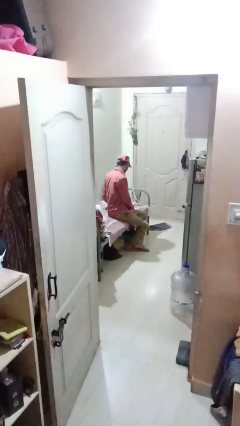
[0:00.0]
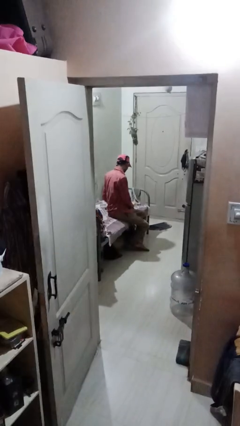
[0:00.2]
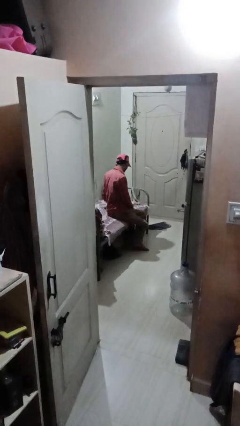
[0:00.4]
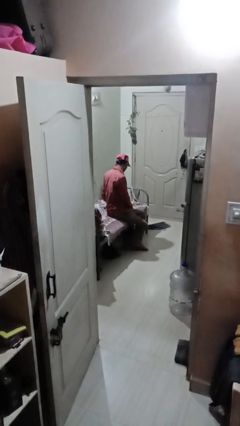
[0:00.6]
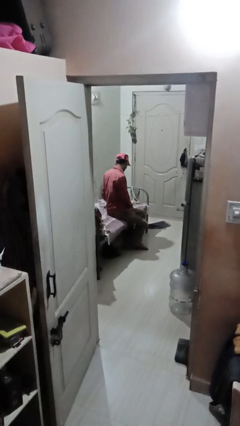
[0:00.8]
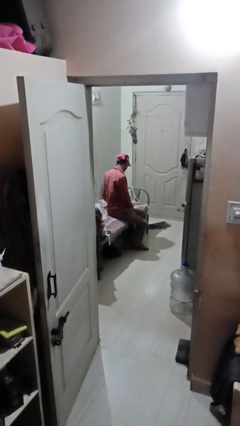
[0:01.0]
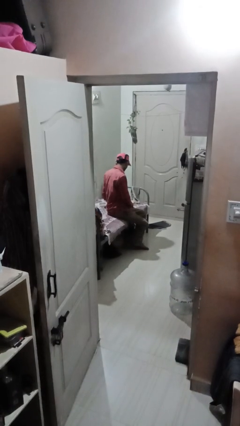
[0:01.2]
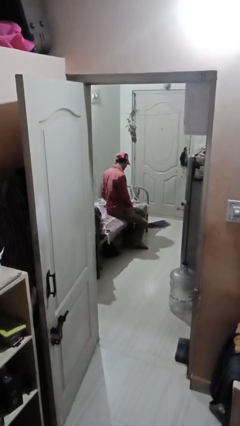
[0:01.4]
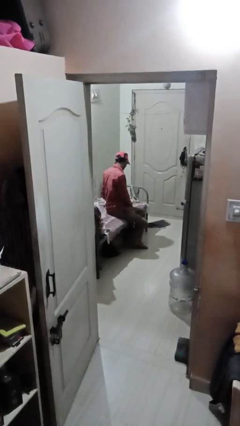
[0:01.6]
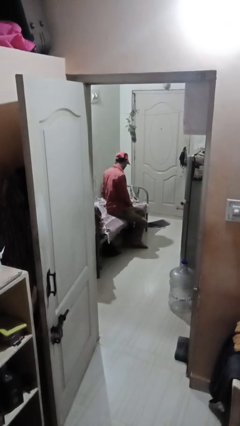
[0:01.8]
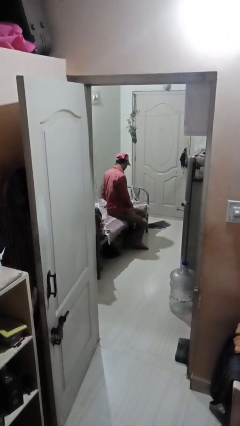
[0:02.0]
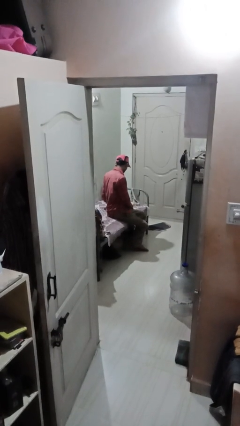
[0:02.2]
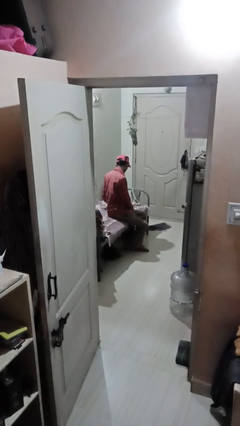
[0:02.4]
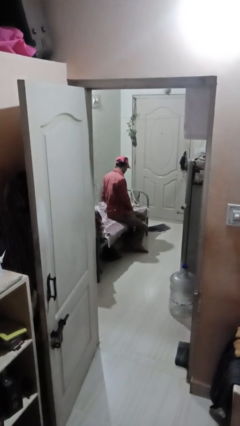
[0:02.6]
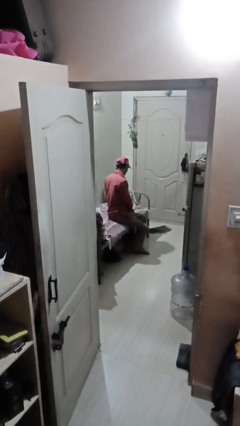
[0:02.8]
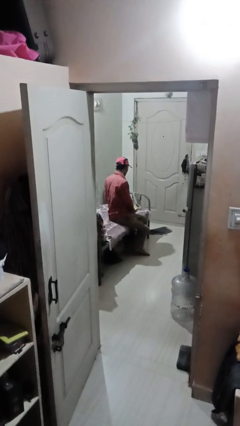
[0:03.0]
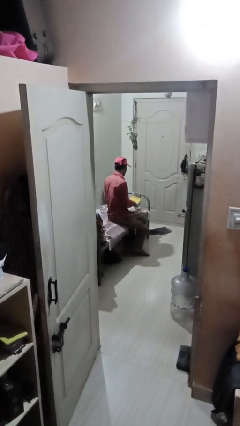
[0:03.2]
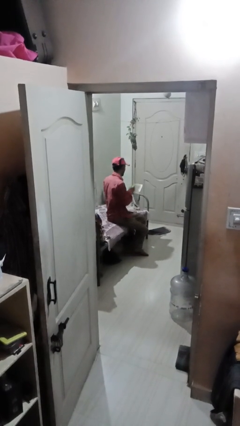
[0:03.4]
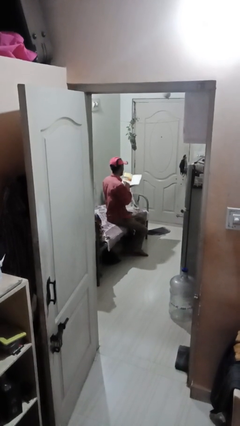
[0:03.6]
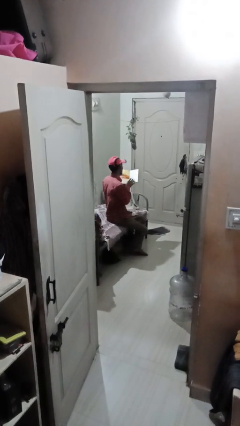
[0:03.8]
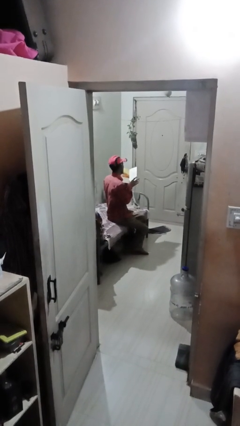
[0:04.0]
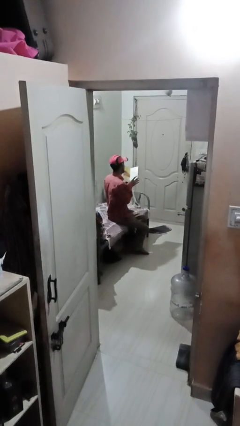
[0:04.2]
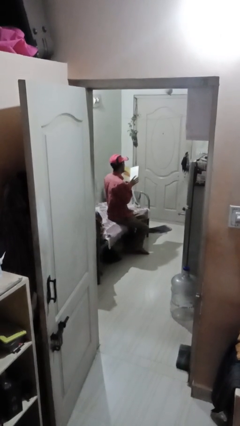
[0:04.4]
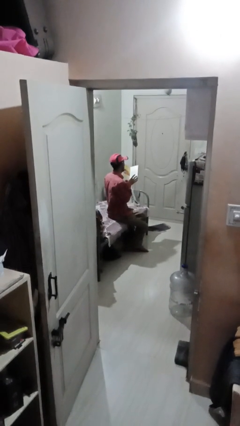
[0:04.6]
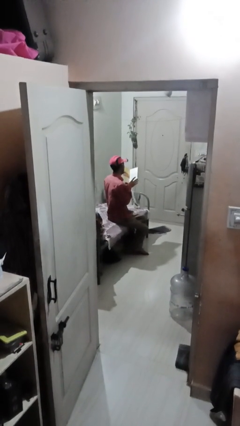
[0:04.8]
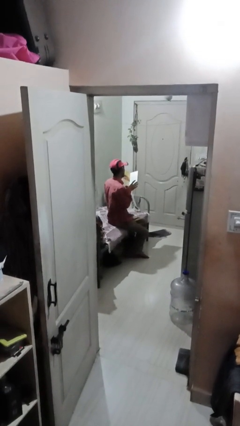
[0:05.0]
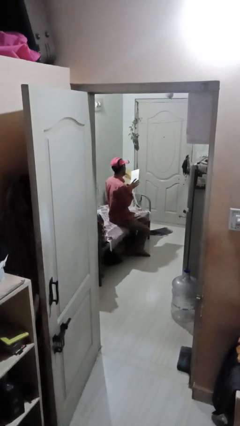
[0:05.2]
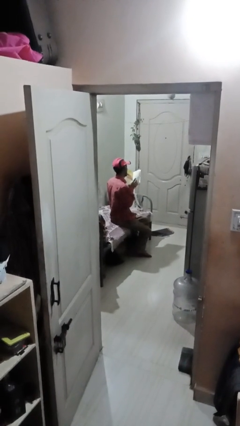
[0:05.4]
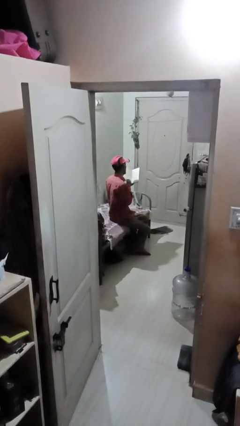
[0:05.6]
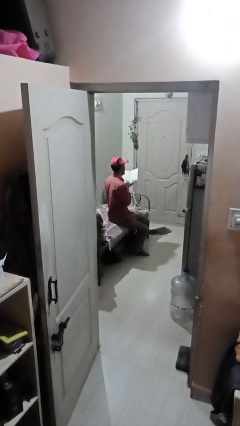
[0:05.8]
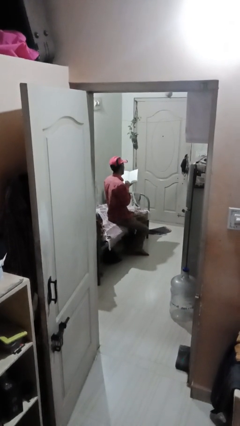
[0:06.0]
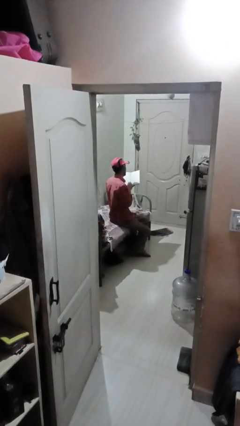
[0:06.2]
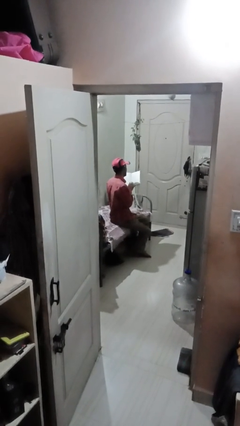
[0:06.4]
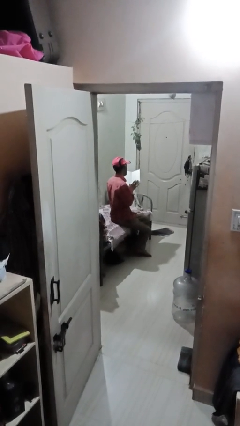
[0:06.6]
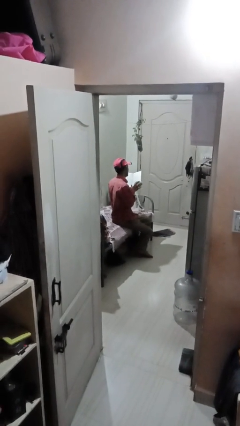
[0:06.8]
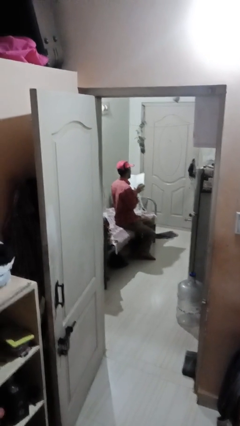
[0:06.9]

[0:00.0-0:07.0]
person reads book

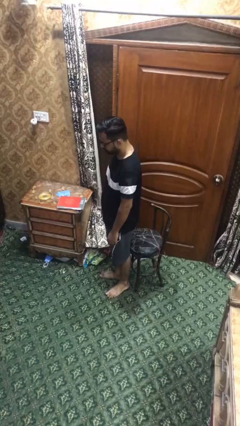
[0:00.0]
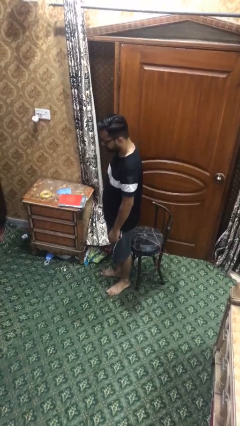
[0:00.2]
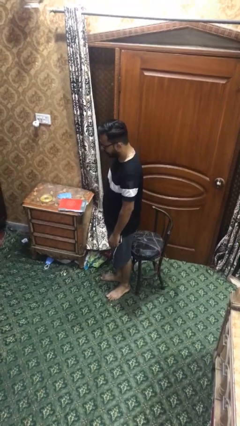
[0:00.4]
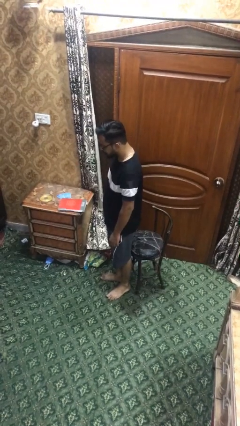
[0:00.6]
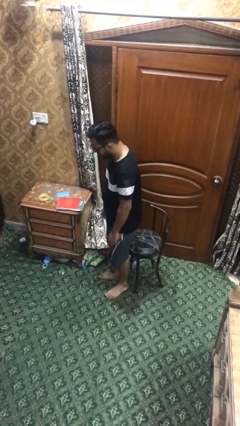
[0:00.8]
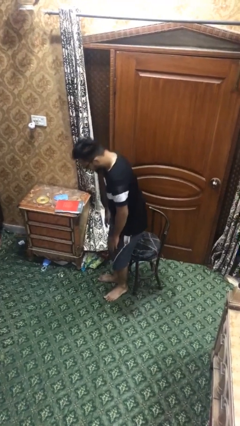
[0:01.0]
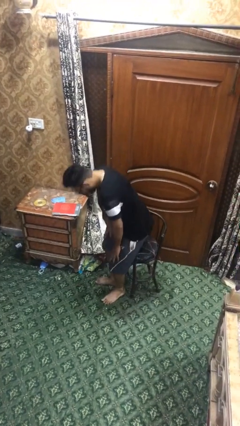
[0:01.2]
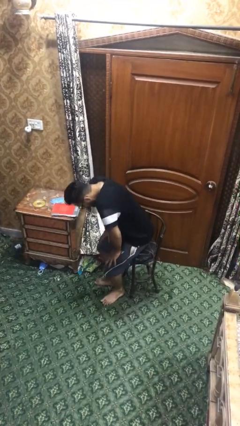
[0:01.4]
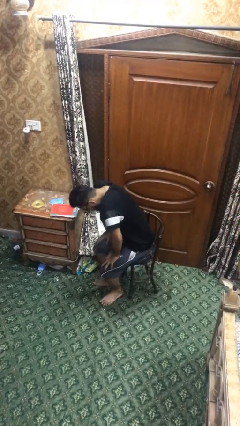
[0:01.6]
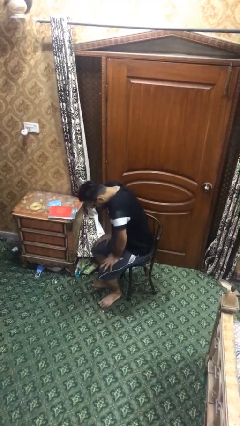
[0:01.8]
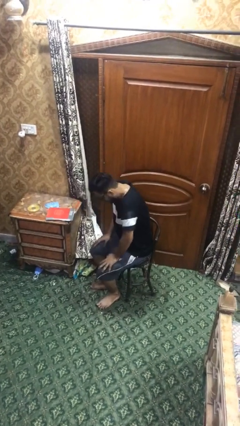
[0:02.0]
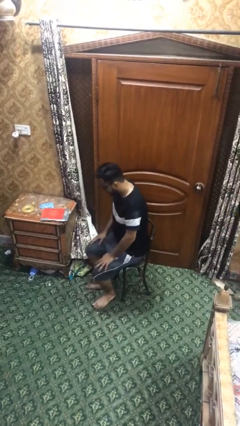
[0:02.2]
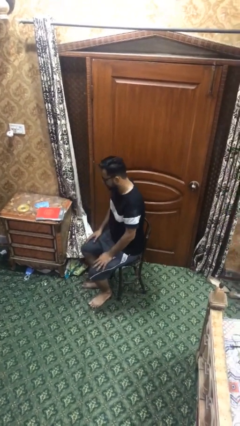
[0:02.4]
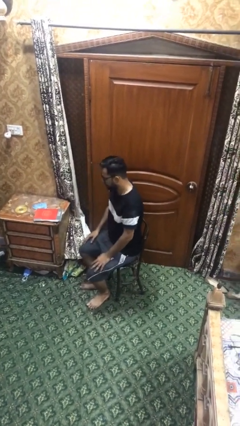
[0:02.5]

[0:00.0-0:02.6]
person sits down

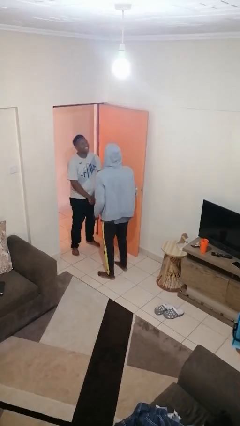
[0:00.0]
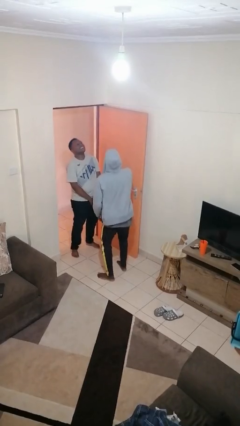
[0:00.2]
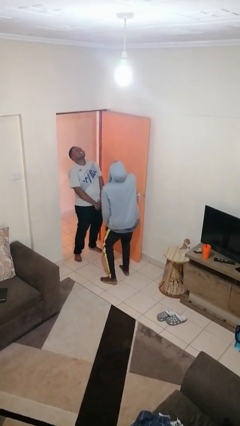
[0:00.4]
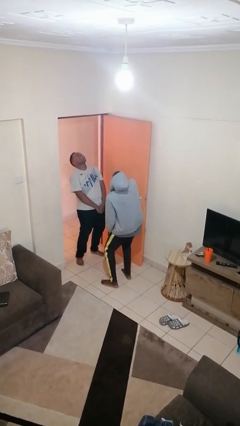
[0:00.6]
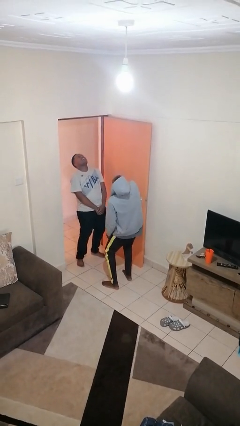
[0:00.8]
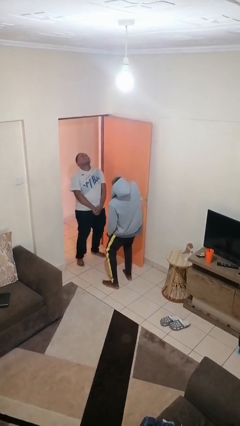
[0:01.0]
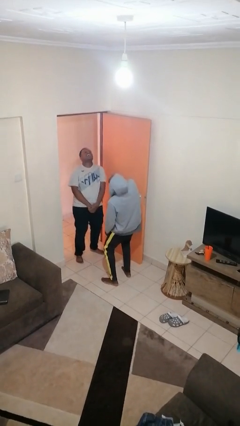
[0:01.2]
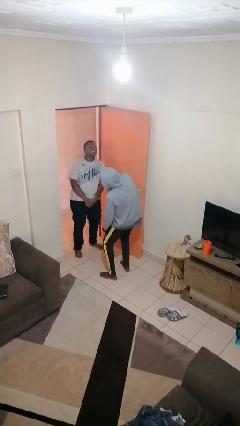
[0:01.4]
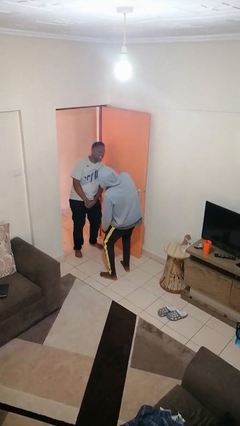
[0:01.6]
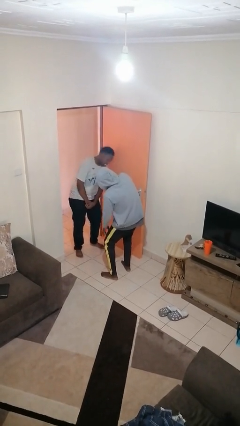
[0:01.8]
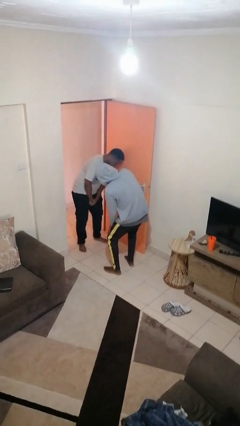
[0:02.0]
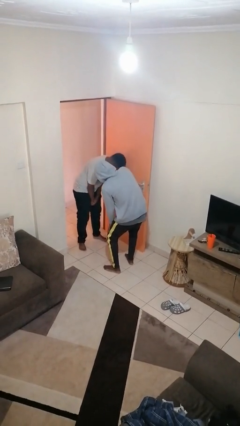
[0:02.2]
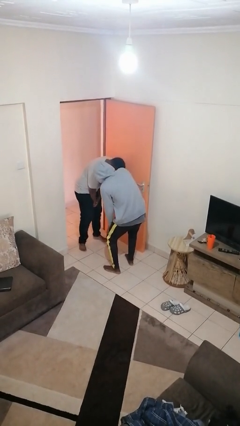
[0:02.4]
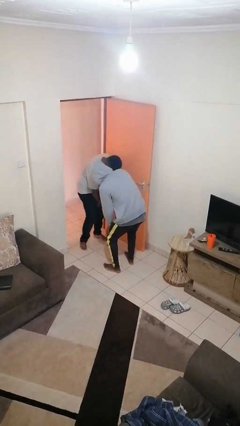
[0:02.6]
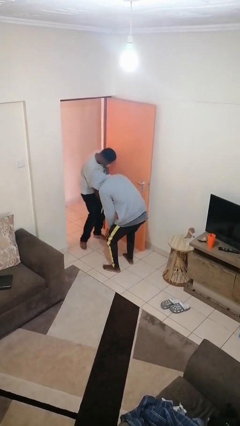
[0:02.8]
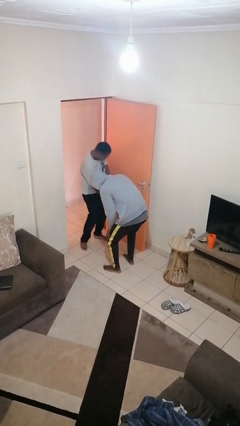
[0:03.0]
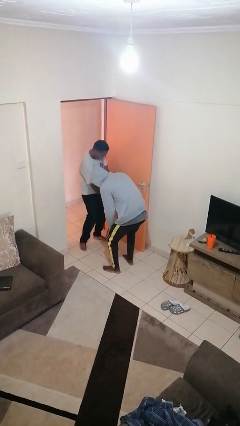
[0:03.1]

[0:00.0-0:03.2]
person laughs with person

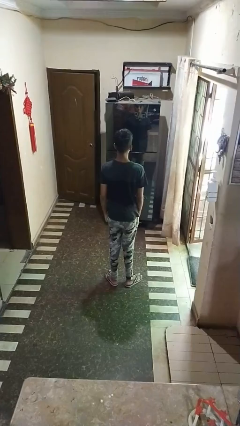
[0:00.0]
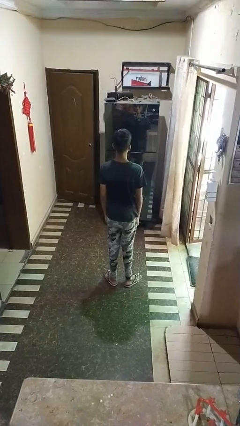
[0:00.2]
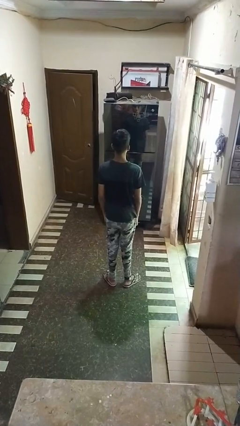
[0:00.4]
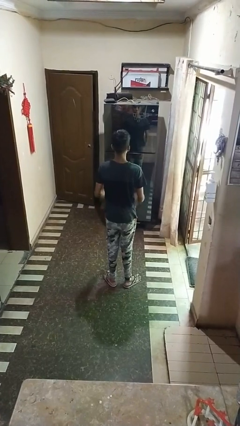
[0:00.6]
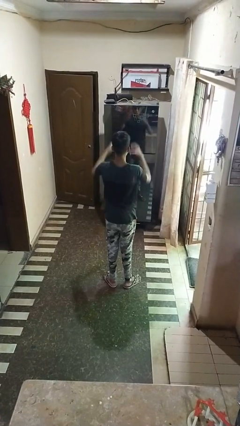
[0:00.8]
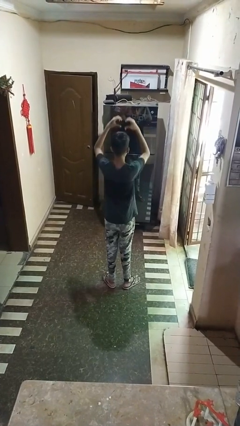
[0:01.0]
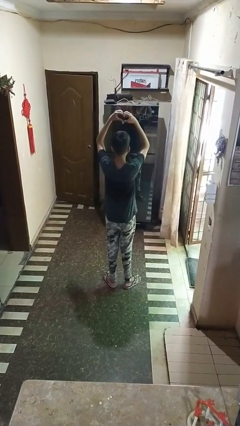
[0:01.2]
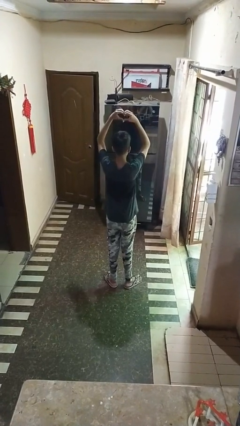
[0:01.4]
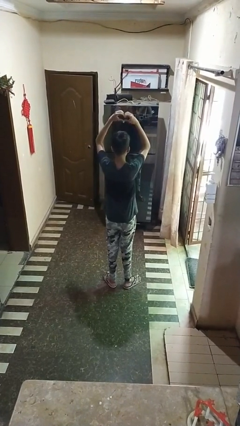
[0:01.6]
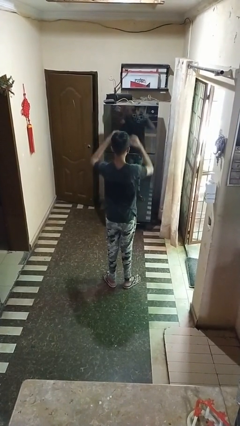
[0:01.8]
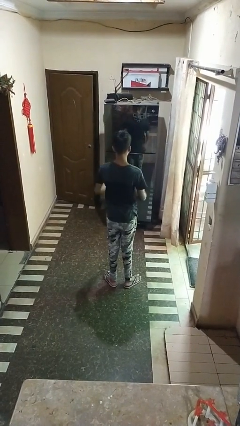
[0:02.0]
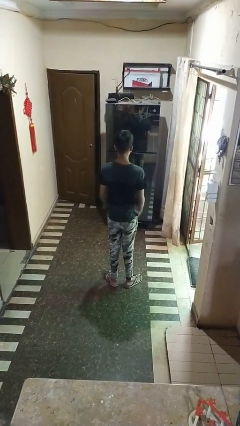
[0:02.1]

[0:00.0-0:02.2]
person gestures heart

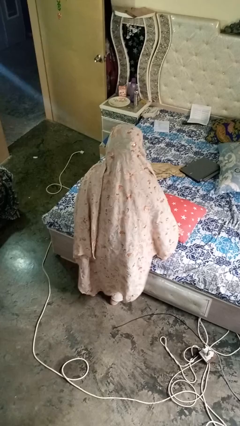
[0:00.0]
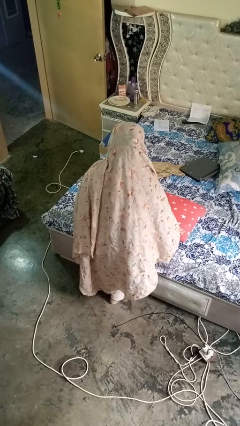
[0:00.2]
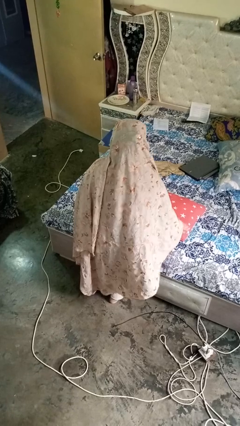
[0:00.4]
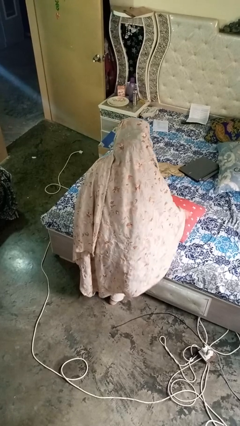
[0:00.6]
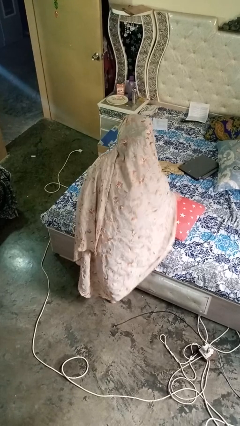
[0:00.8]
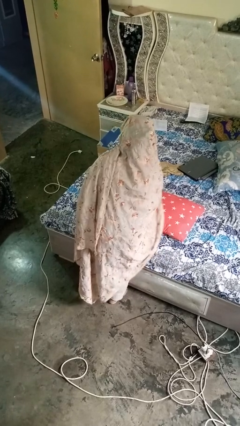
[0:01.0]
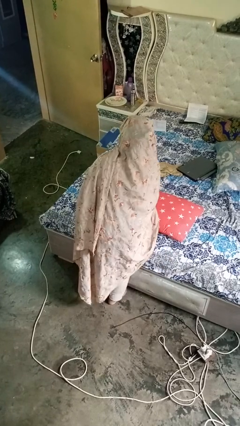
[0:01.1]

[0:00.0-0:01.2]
person waves hand over object

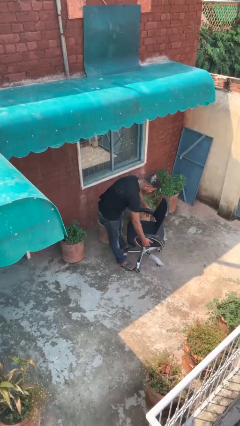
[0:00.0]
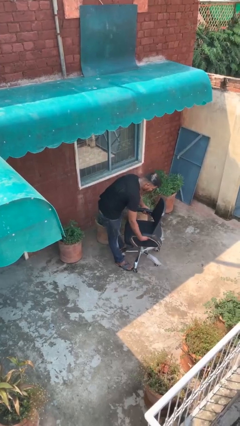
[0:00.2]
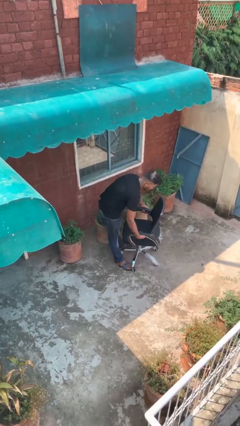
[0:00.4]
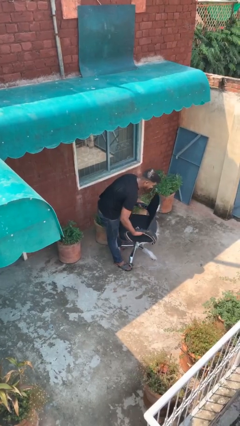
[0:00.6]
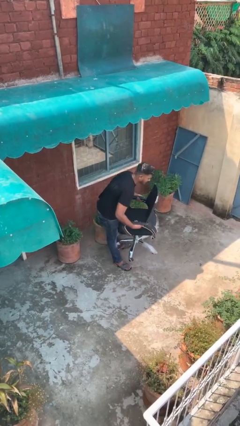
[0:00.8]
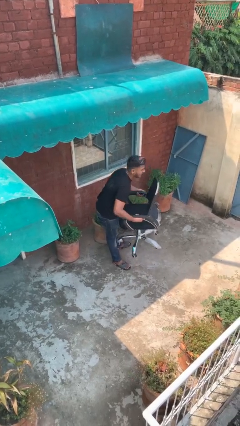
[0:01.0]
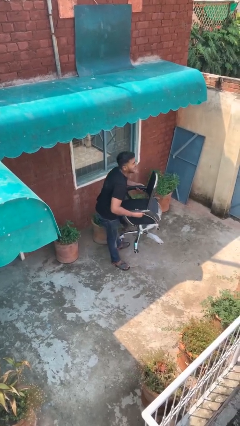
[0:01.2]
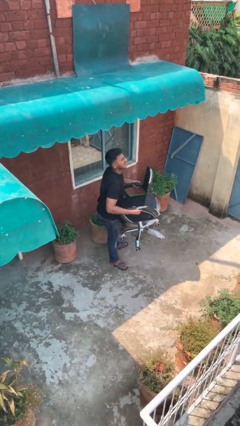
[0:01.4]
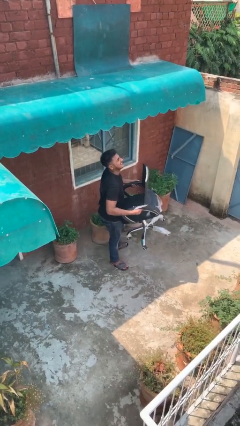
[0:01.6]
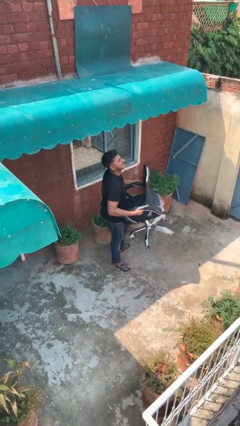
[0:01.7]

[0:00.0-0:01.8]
person picks up object from floor
